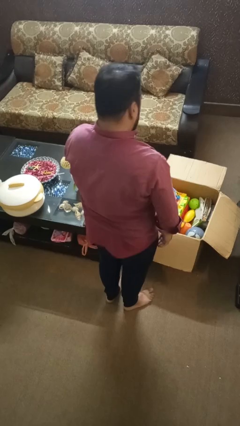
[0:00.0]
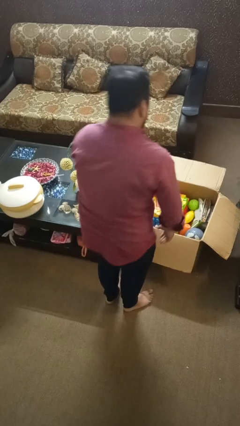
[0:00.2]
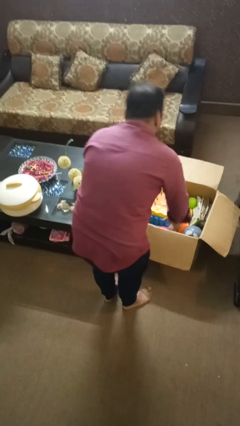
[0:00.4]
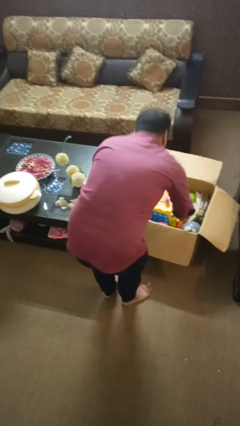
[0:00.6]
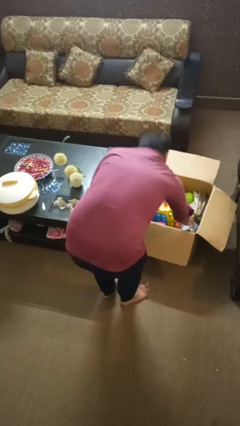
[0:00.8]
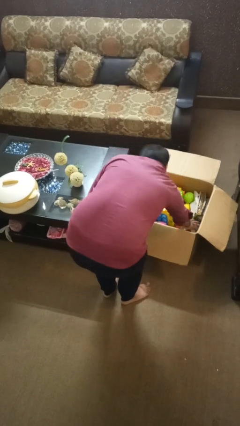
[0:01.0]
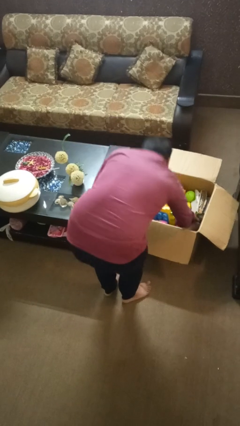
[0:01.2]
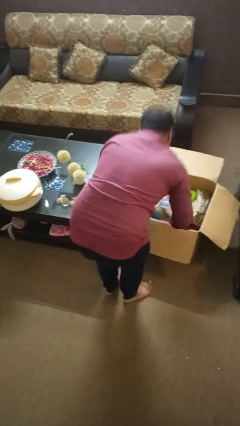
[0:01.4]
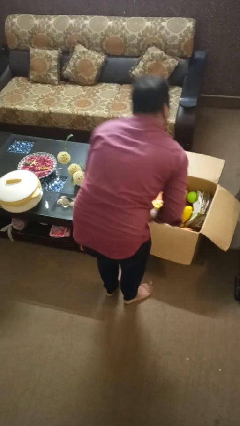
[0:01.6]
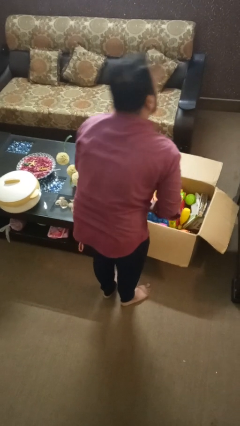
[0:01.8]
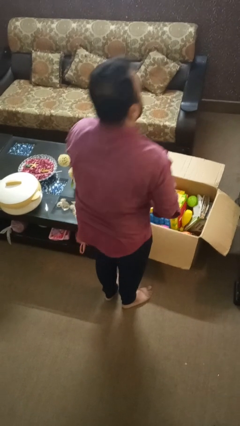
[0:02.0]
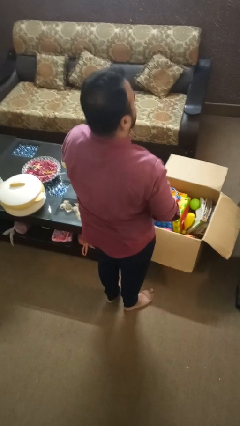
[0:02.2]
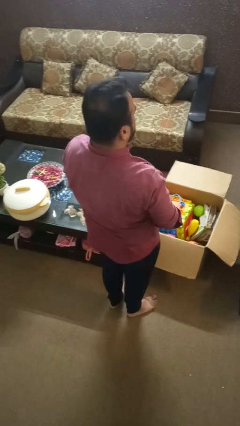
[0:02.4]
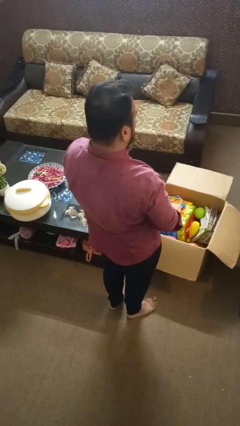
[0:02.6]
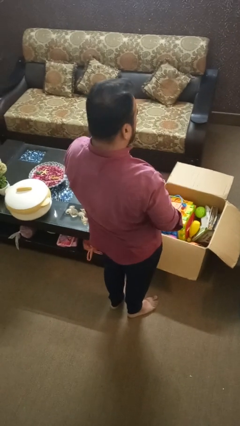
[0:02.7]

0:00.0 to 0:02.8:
person takes object from box

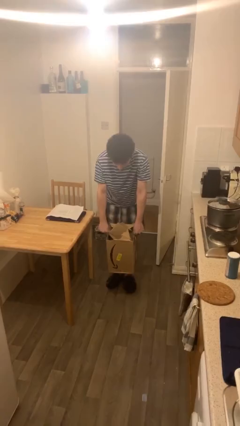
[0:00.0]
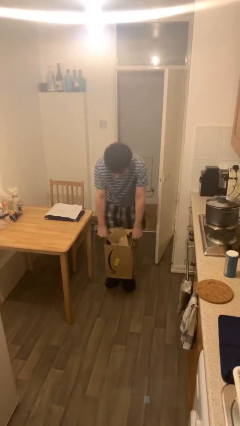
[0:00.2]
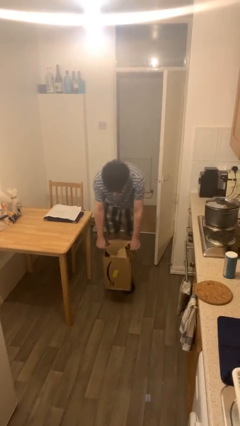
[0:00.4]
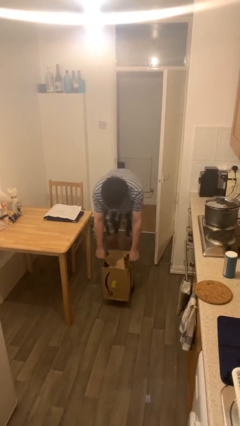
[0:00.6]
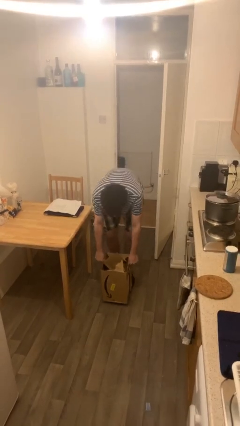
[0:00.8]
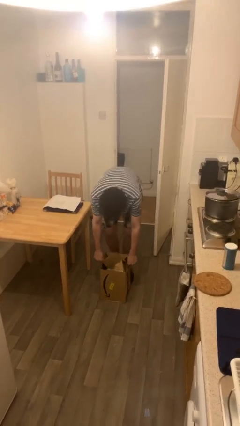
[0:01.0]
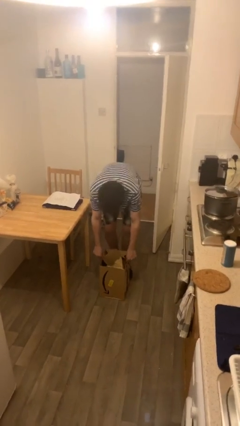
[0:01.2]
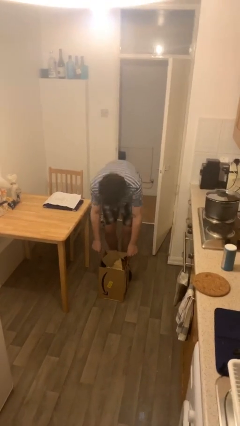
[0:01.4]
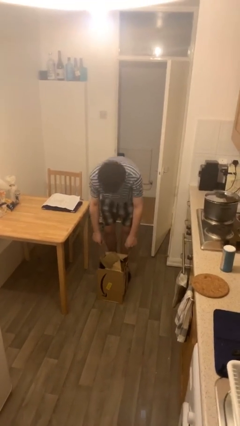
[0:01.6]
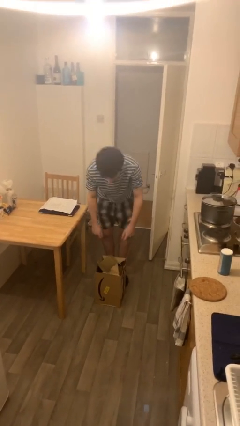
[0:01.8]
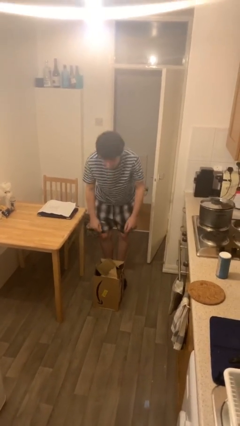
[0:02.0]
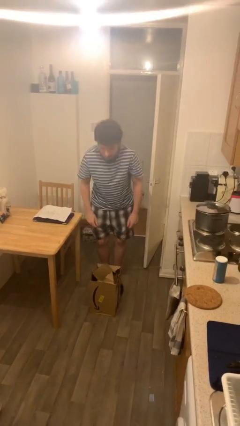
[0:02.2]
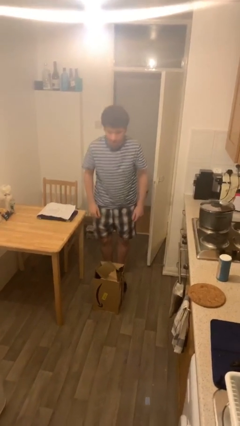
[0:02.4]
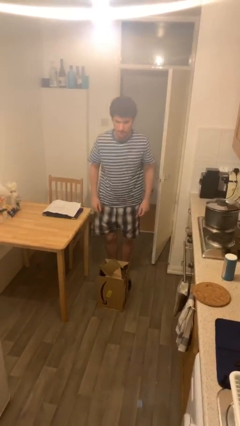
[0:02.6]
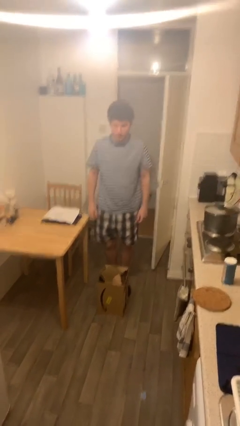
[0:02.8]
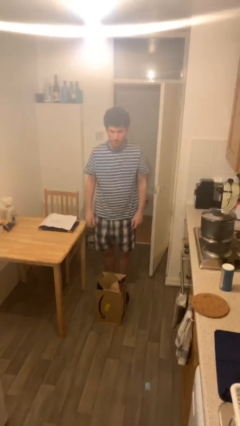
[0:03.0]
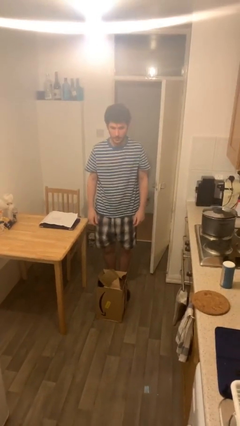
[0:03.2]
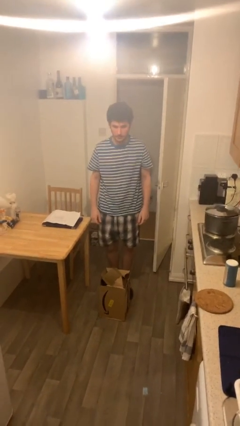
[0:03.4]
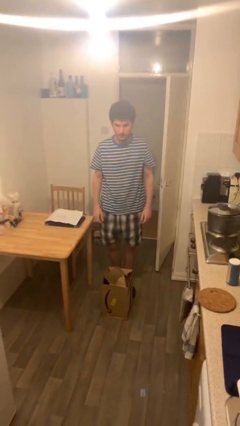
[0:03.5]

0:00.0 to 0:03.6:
person puts down object on floor

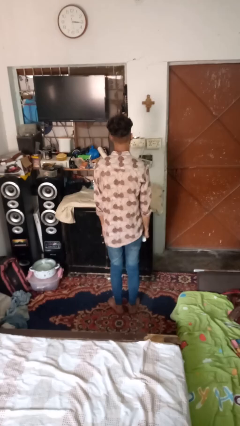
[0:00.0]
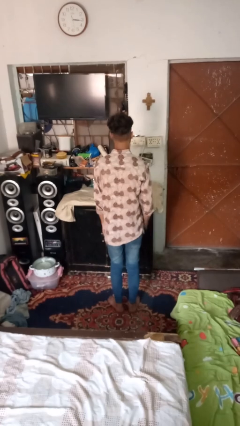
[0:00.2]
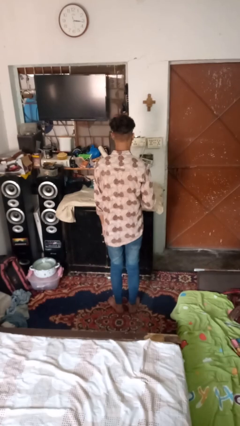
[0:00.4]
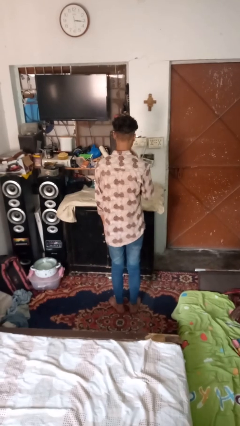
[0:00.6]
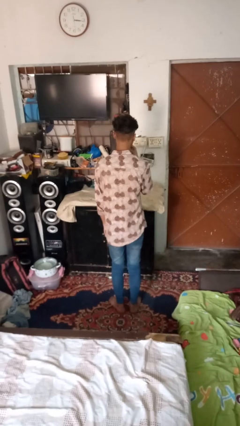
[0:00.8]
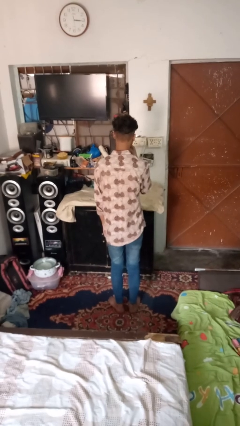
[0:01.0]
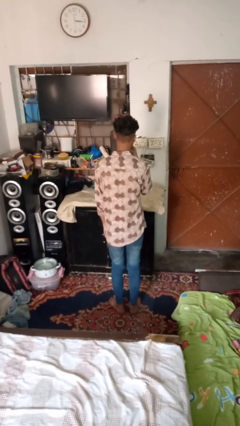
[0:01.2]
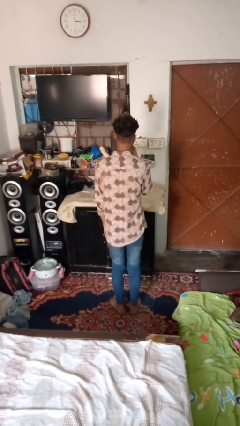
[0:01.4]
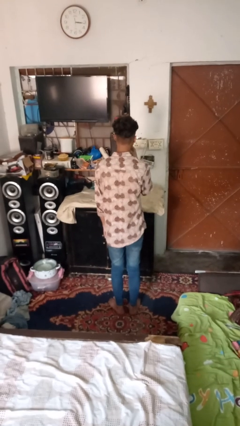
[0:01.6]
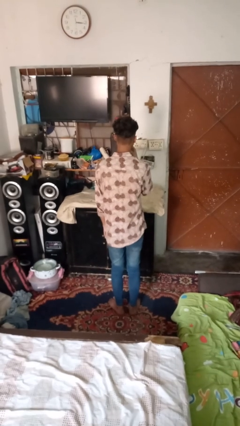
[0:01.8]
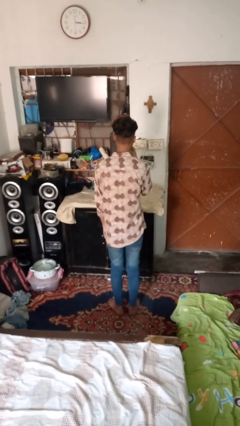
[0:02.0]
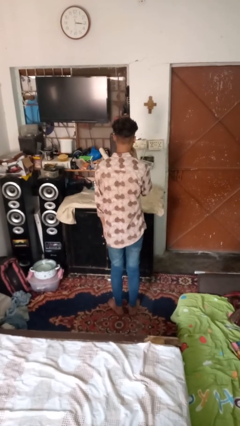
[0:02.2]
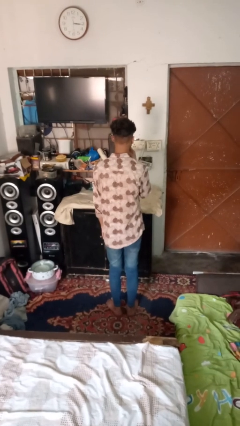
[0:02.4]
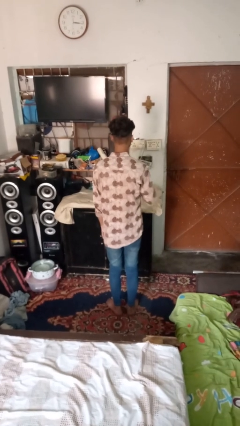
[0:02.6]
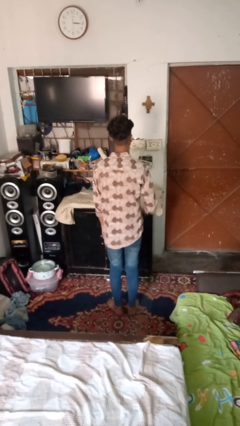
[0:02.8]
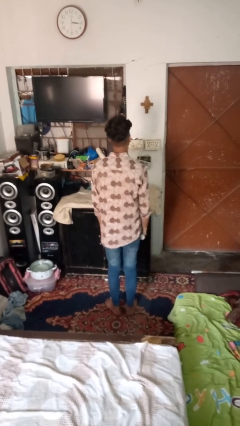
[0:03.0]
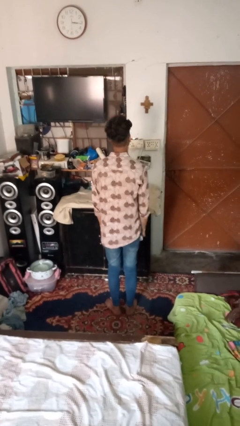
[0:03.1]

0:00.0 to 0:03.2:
person vapes

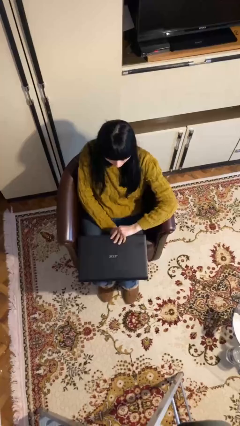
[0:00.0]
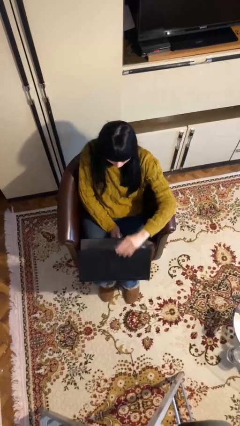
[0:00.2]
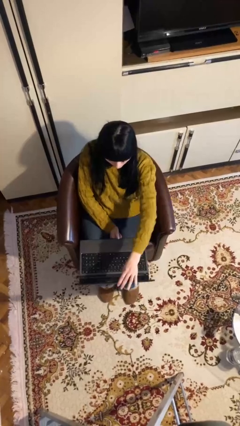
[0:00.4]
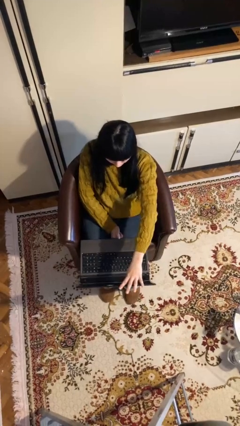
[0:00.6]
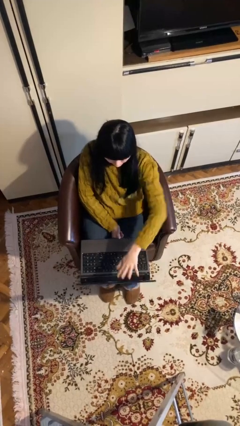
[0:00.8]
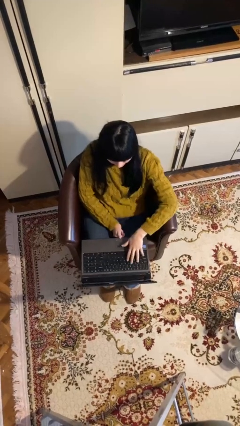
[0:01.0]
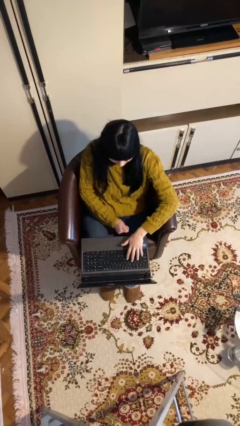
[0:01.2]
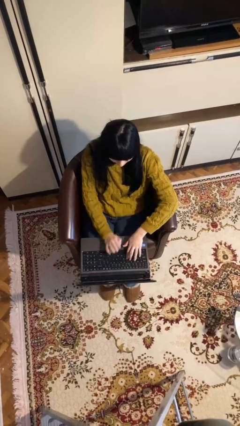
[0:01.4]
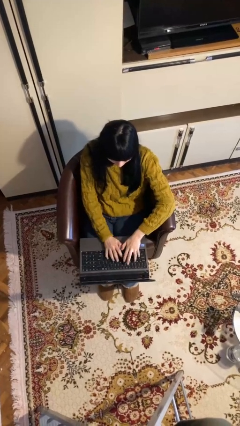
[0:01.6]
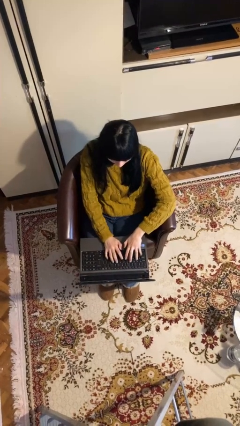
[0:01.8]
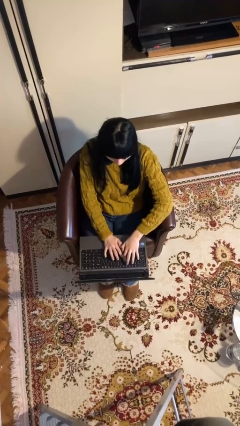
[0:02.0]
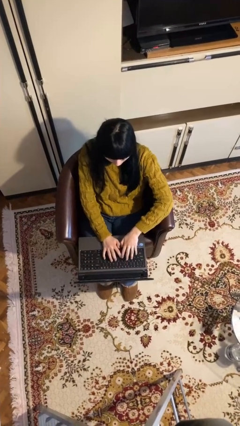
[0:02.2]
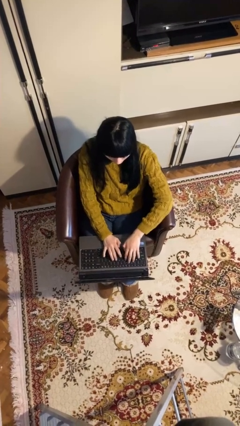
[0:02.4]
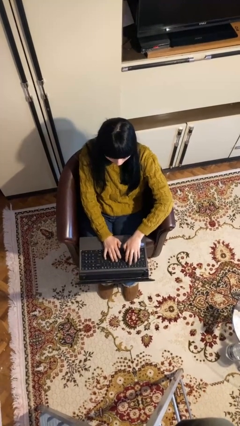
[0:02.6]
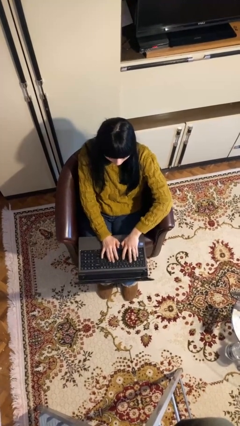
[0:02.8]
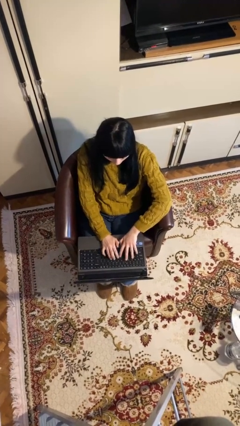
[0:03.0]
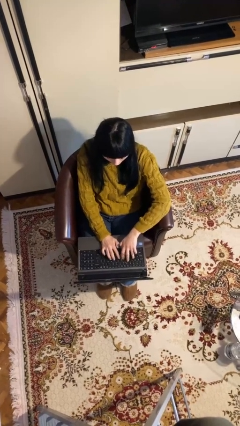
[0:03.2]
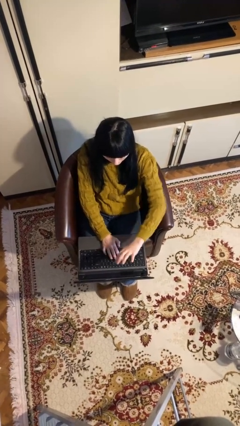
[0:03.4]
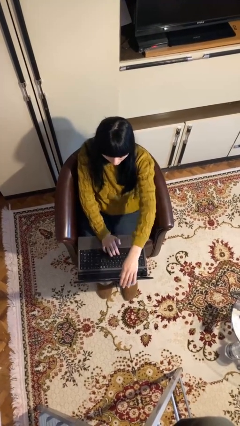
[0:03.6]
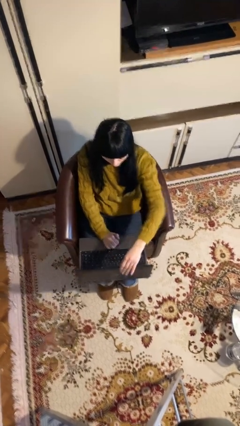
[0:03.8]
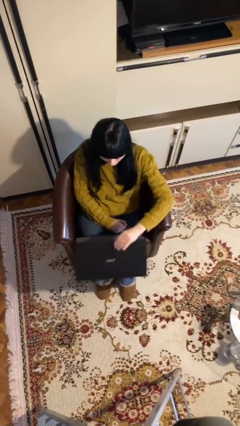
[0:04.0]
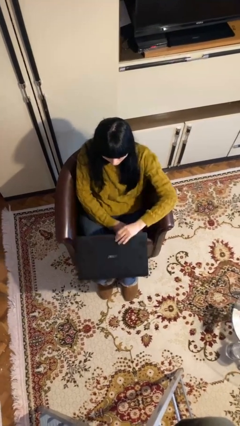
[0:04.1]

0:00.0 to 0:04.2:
person interacts with laptop

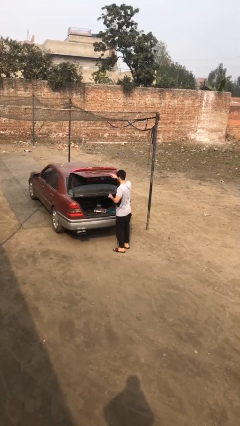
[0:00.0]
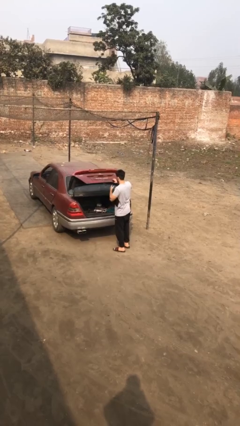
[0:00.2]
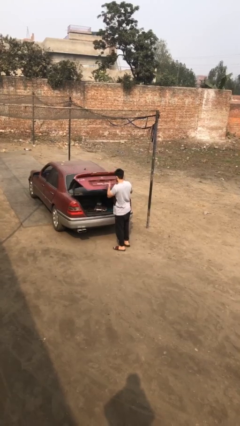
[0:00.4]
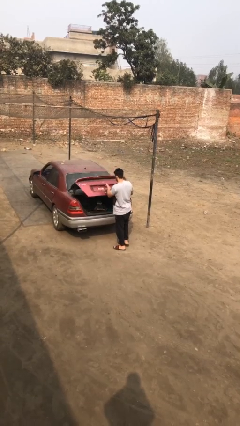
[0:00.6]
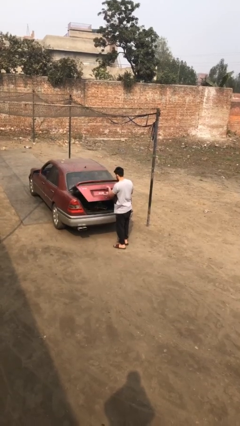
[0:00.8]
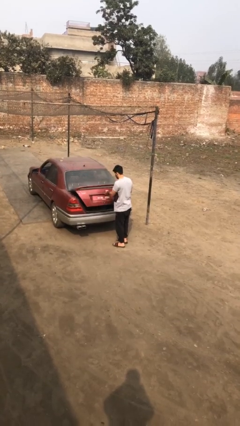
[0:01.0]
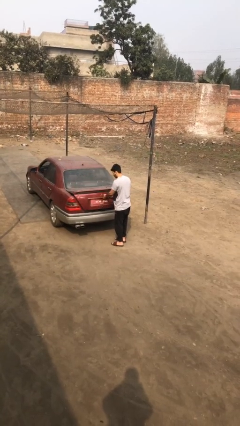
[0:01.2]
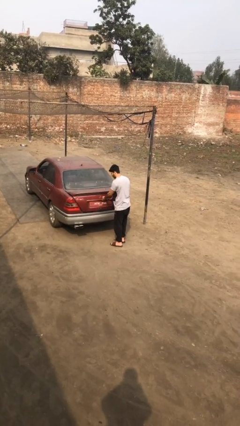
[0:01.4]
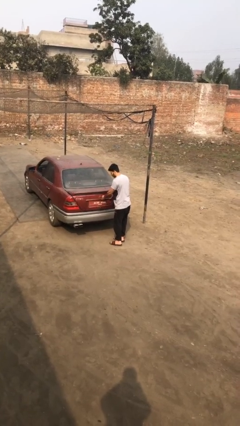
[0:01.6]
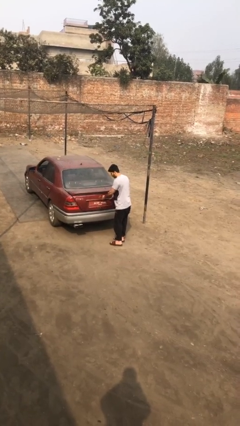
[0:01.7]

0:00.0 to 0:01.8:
person closes car trunk

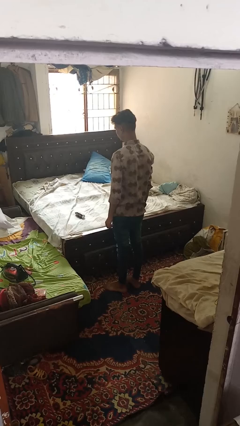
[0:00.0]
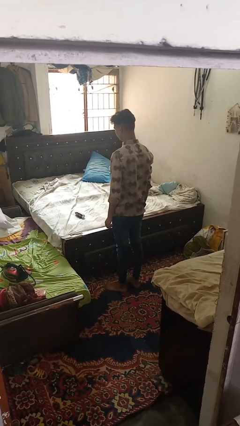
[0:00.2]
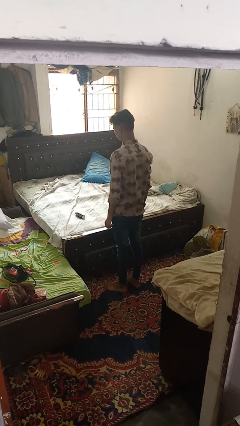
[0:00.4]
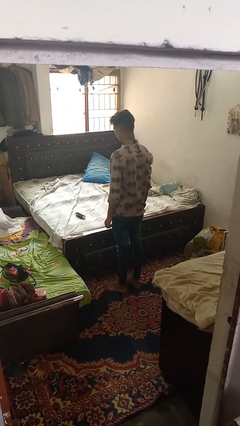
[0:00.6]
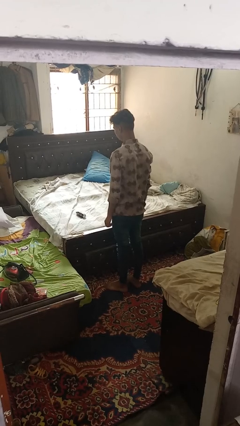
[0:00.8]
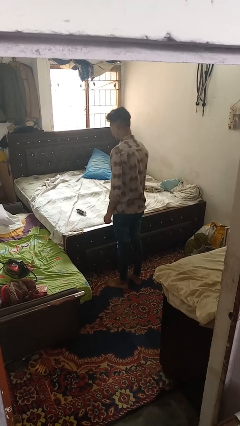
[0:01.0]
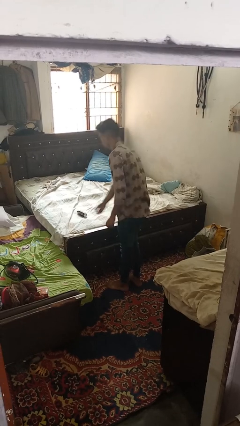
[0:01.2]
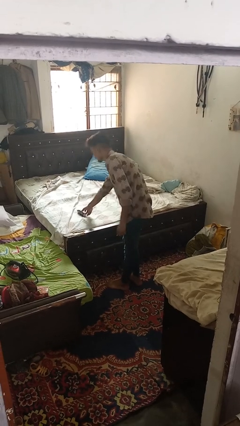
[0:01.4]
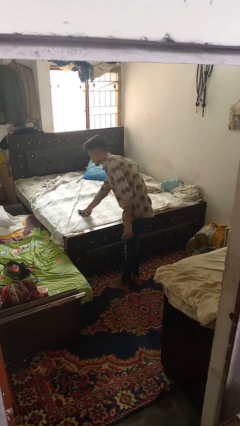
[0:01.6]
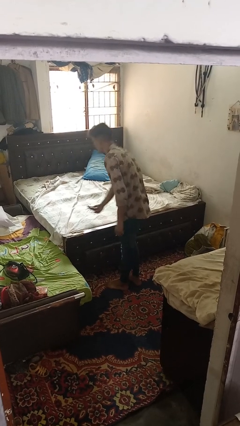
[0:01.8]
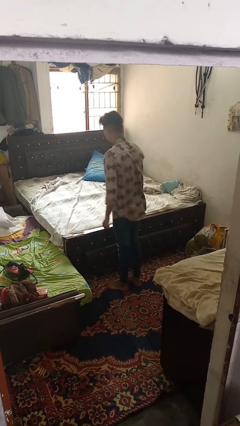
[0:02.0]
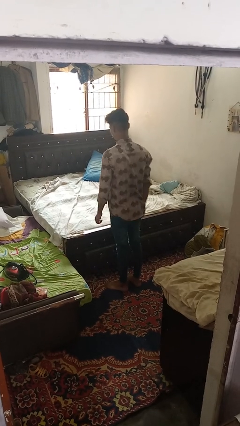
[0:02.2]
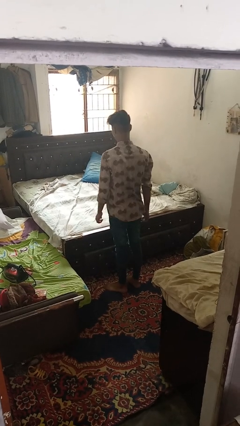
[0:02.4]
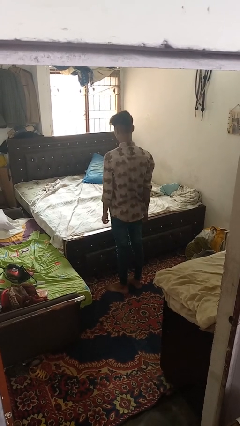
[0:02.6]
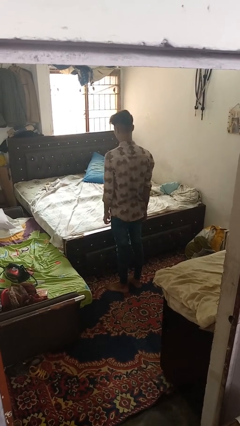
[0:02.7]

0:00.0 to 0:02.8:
person picks up object from bed
